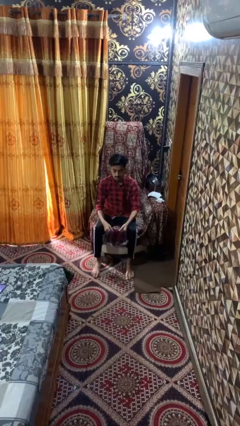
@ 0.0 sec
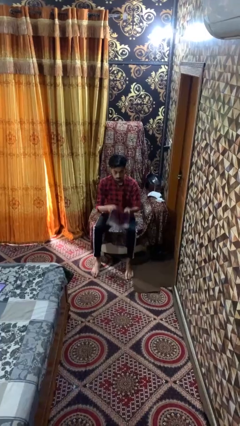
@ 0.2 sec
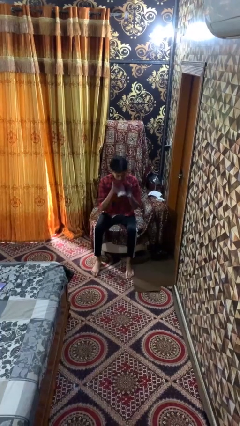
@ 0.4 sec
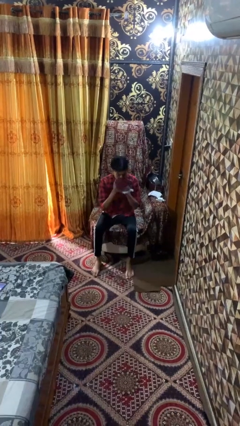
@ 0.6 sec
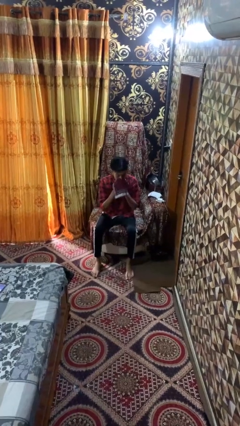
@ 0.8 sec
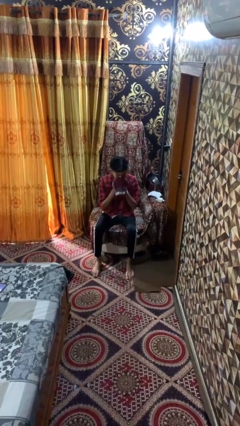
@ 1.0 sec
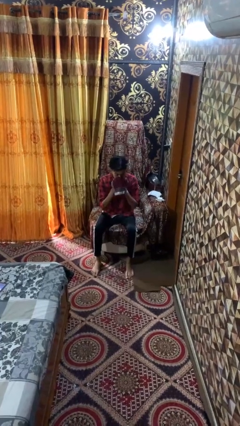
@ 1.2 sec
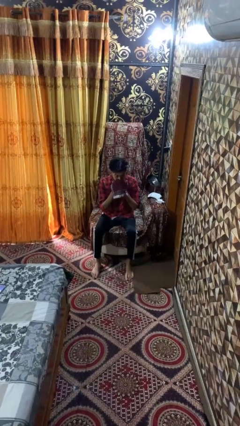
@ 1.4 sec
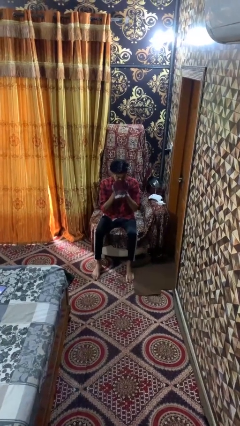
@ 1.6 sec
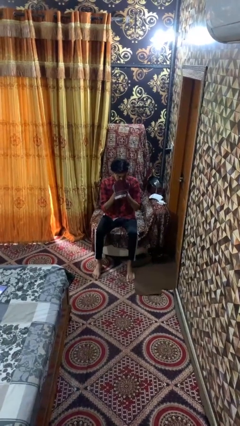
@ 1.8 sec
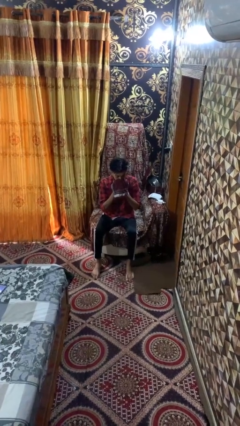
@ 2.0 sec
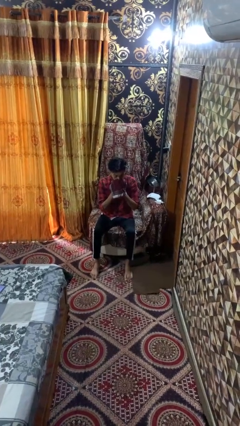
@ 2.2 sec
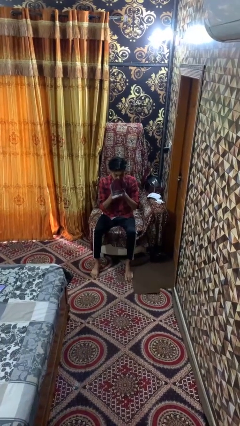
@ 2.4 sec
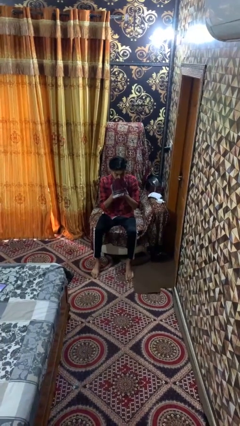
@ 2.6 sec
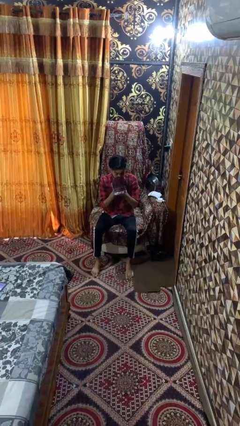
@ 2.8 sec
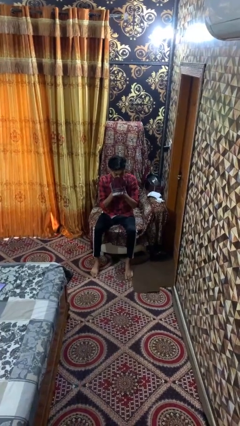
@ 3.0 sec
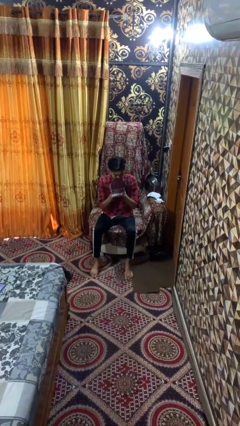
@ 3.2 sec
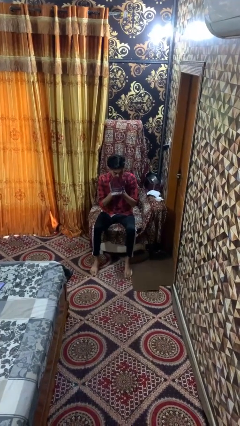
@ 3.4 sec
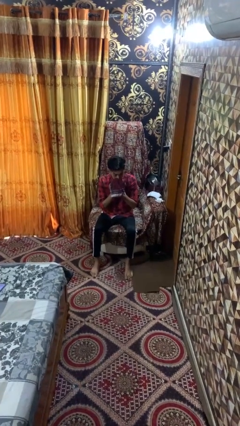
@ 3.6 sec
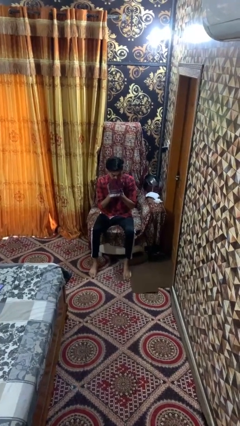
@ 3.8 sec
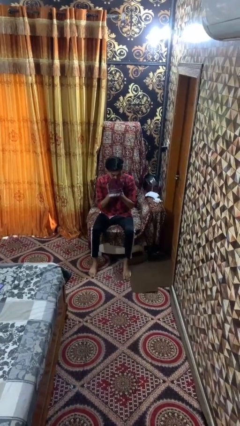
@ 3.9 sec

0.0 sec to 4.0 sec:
person blows nose

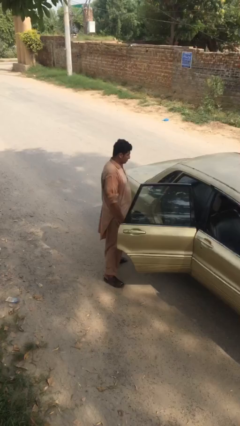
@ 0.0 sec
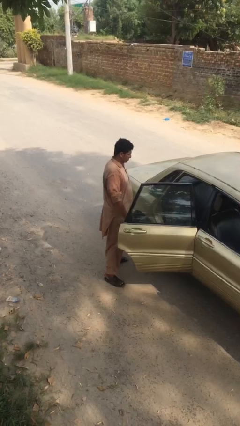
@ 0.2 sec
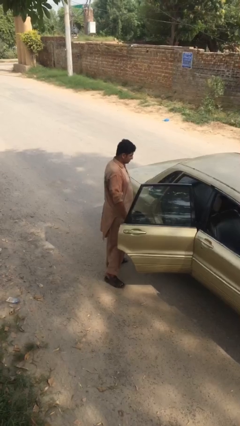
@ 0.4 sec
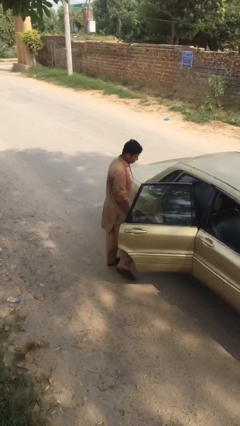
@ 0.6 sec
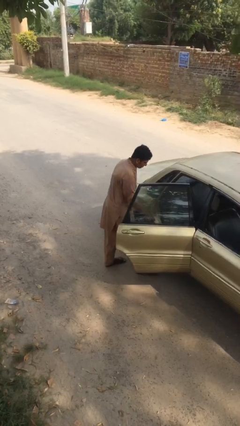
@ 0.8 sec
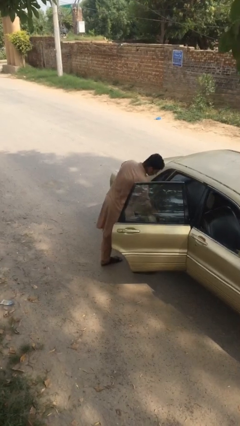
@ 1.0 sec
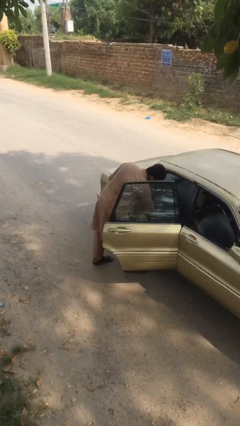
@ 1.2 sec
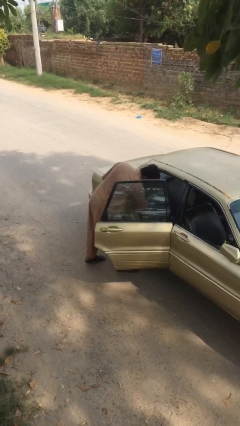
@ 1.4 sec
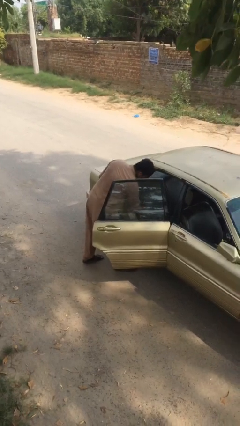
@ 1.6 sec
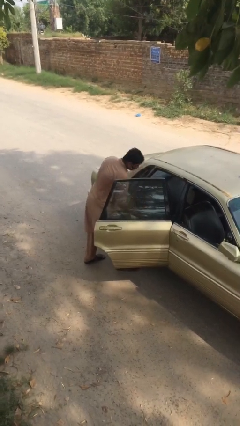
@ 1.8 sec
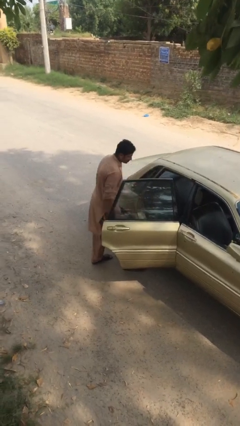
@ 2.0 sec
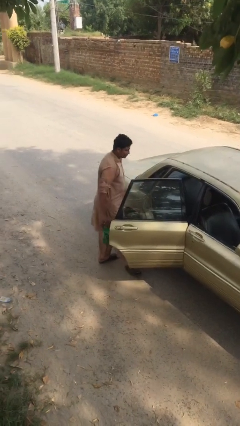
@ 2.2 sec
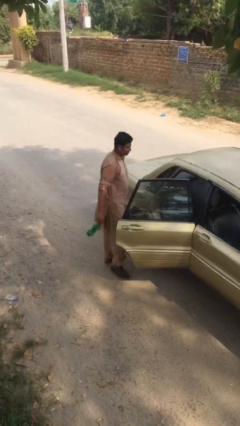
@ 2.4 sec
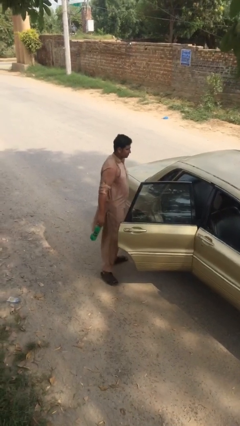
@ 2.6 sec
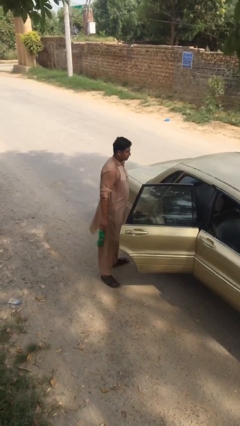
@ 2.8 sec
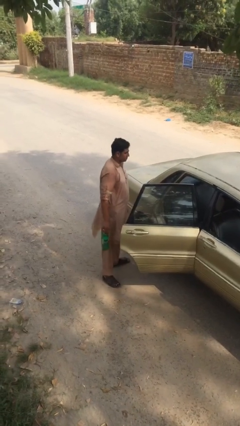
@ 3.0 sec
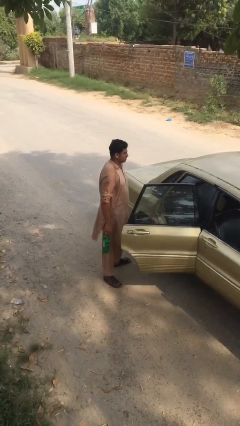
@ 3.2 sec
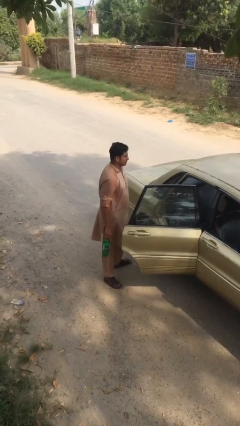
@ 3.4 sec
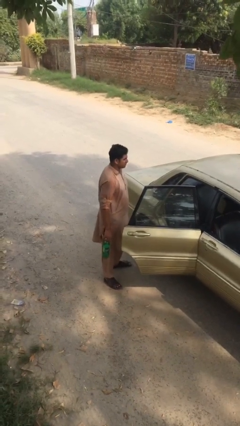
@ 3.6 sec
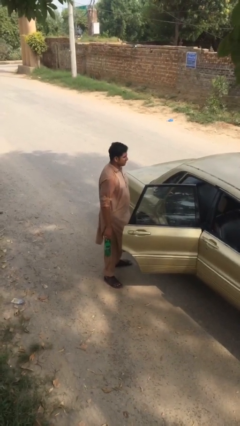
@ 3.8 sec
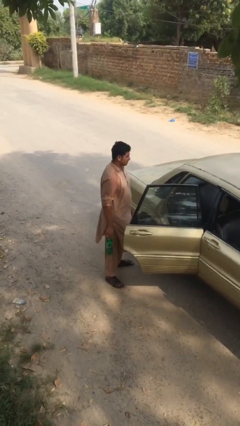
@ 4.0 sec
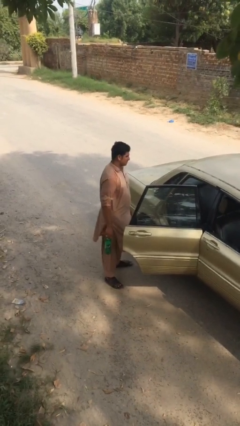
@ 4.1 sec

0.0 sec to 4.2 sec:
person unloads car

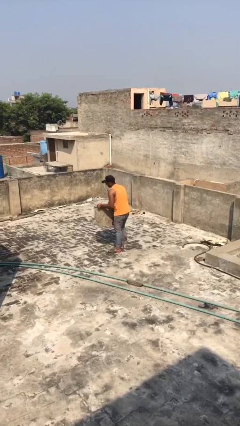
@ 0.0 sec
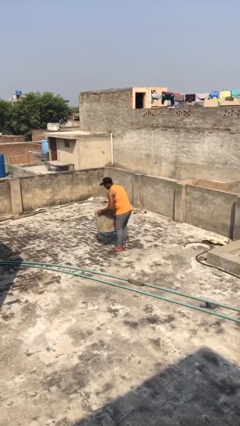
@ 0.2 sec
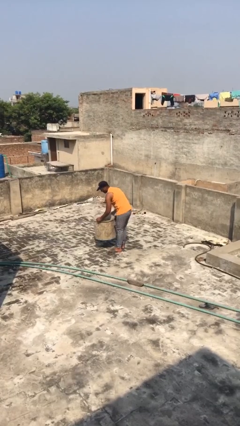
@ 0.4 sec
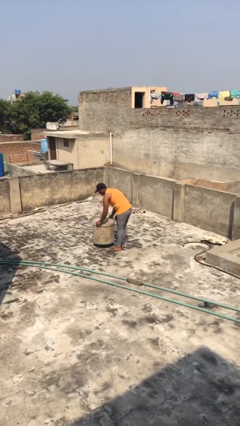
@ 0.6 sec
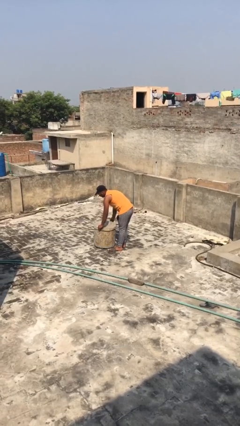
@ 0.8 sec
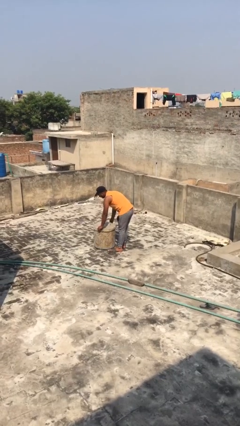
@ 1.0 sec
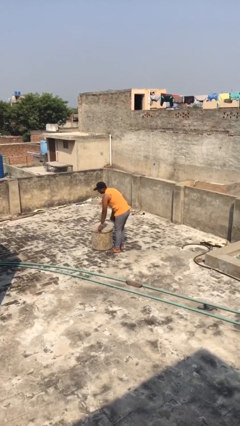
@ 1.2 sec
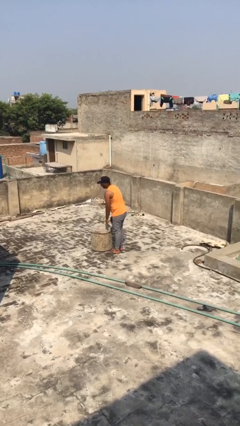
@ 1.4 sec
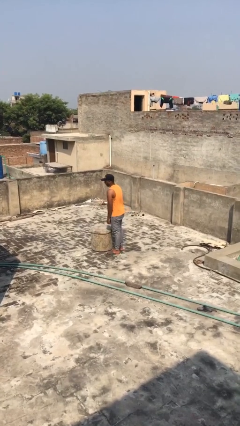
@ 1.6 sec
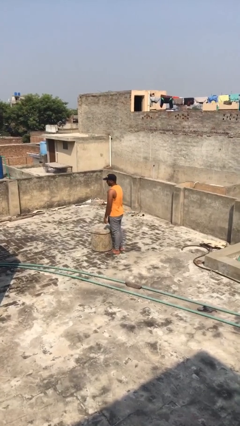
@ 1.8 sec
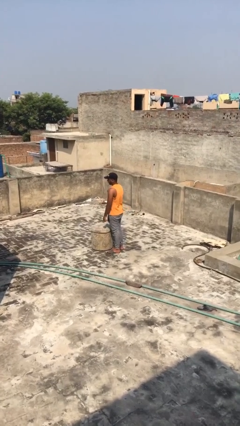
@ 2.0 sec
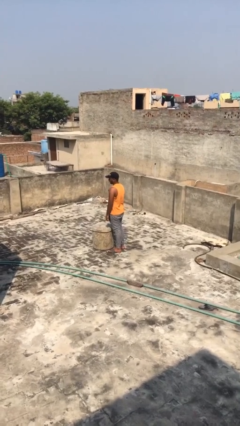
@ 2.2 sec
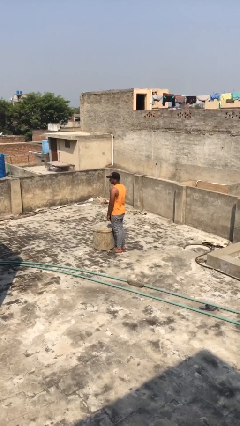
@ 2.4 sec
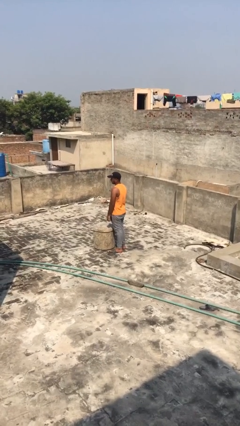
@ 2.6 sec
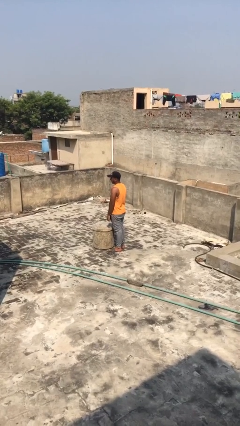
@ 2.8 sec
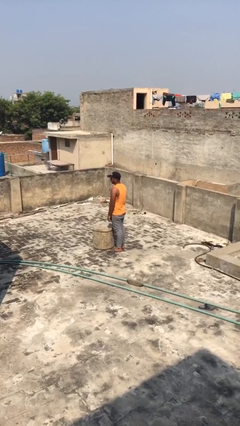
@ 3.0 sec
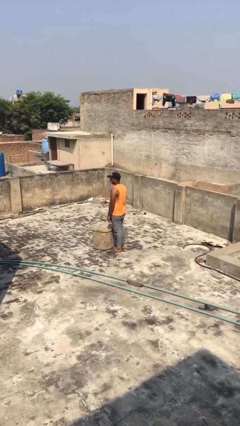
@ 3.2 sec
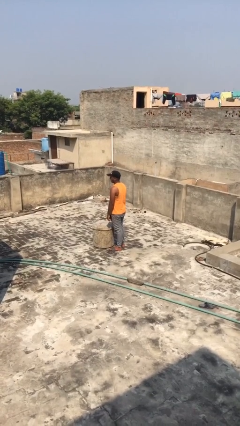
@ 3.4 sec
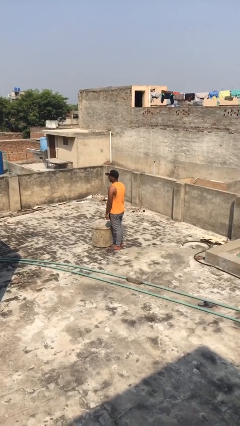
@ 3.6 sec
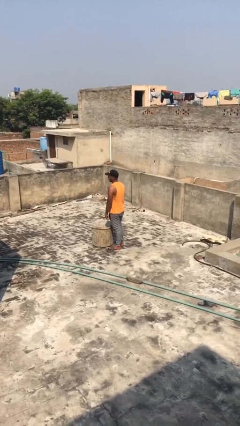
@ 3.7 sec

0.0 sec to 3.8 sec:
person puts down object on floor

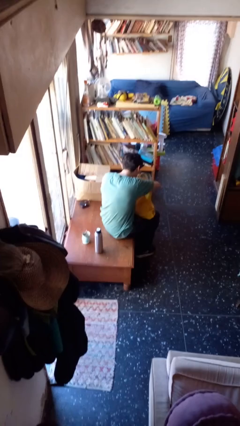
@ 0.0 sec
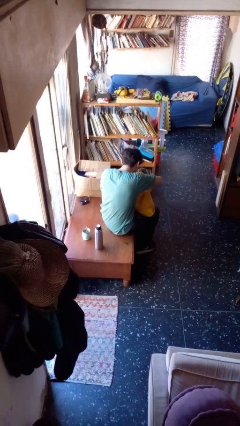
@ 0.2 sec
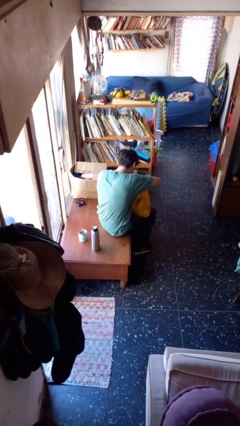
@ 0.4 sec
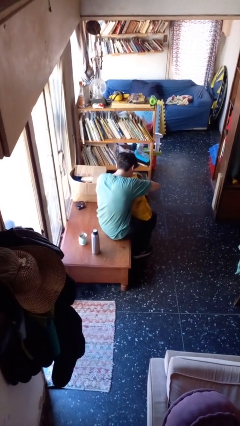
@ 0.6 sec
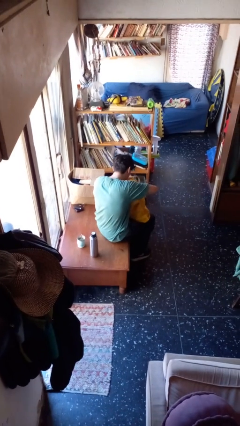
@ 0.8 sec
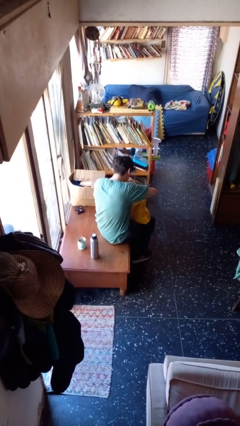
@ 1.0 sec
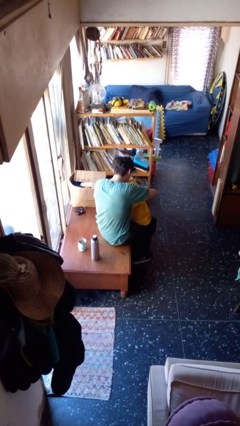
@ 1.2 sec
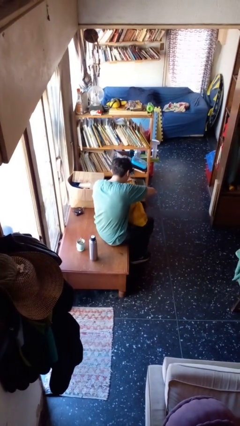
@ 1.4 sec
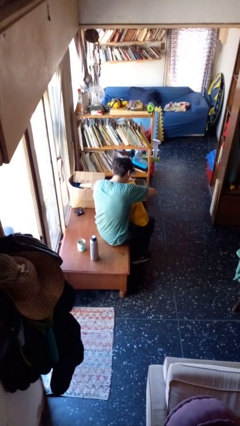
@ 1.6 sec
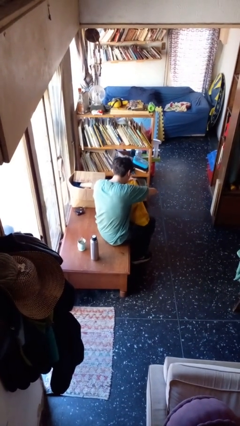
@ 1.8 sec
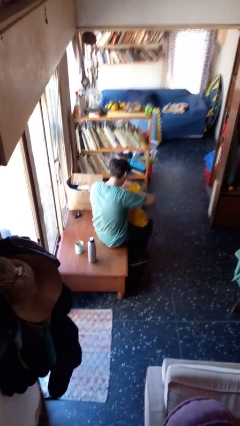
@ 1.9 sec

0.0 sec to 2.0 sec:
person searches in bag

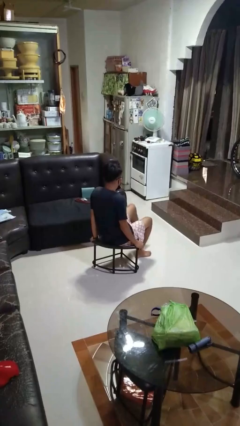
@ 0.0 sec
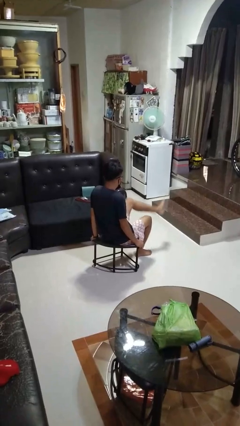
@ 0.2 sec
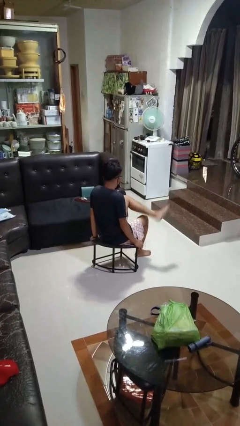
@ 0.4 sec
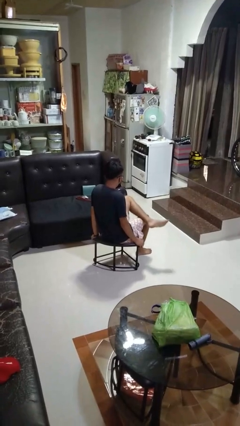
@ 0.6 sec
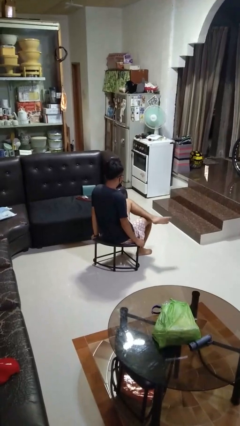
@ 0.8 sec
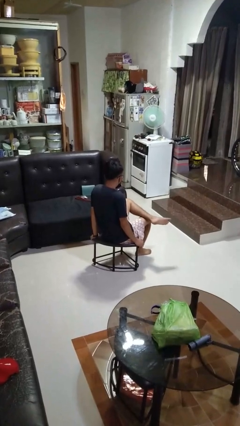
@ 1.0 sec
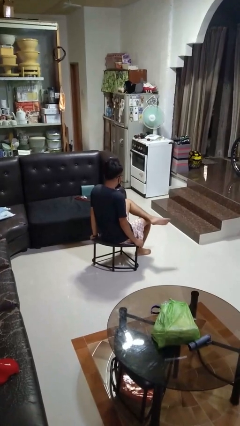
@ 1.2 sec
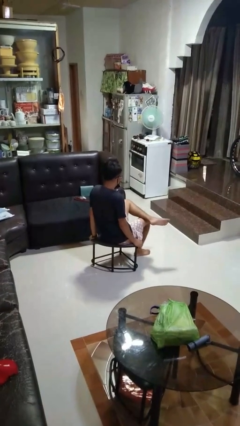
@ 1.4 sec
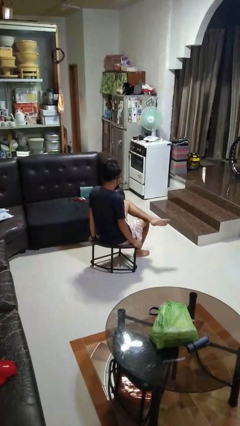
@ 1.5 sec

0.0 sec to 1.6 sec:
person crosses legs

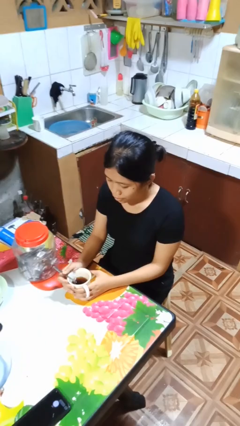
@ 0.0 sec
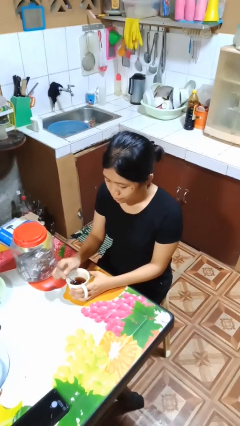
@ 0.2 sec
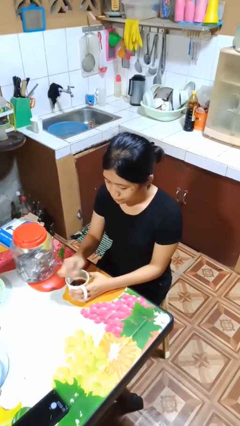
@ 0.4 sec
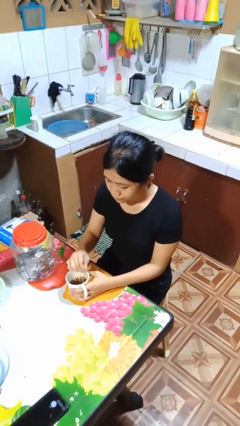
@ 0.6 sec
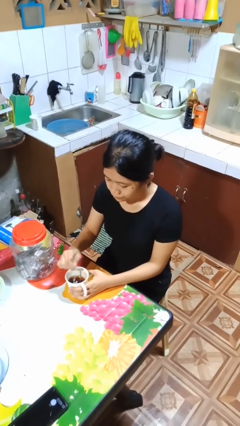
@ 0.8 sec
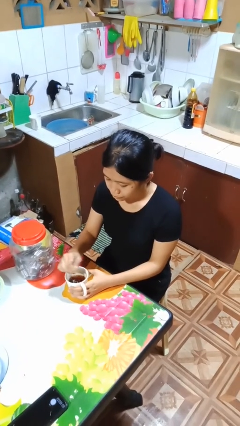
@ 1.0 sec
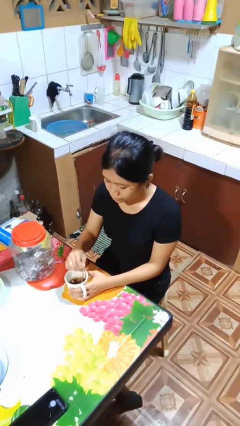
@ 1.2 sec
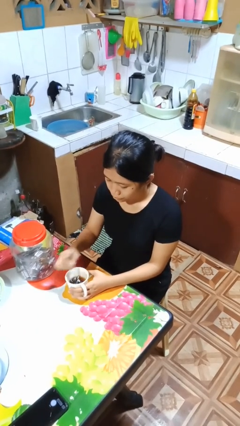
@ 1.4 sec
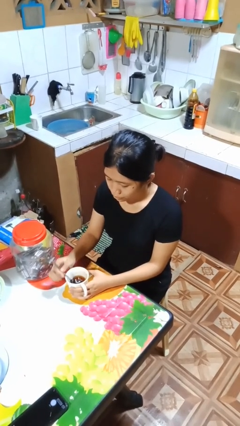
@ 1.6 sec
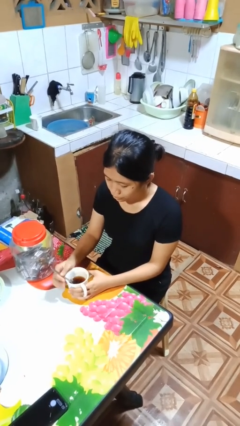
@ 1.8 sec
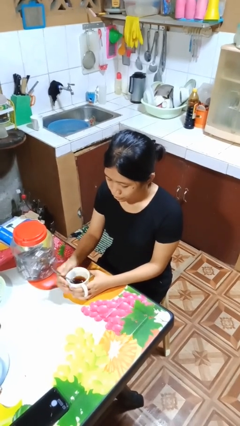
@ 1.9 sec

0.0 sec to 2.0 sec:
person stirs mug
